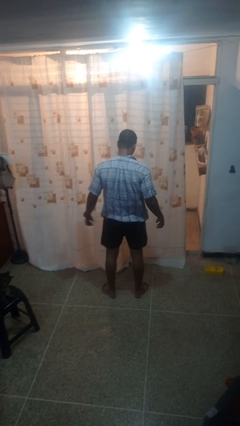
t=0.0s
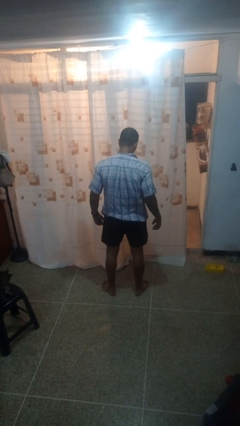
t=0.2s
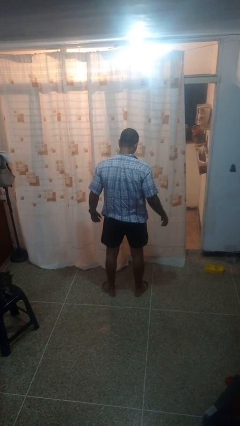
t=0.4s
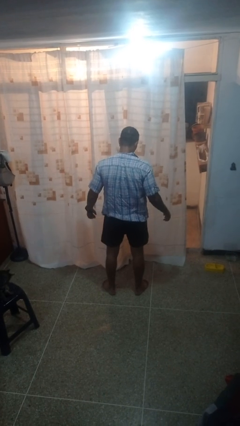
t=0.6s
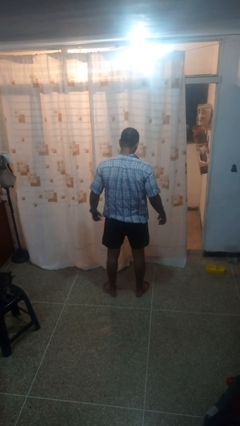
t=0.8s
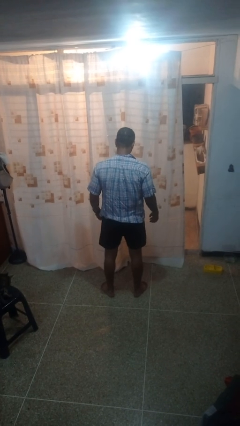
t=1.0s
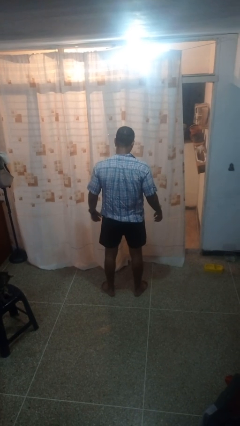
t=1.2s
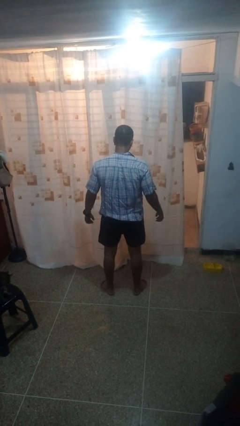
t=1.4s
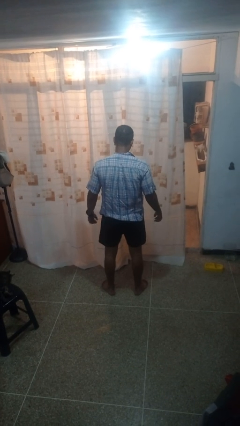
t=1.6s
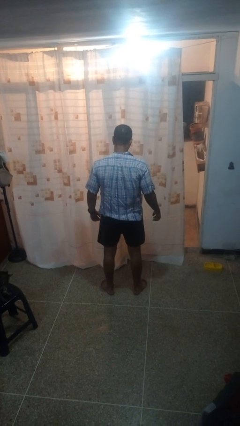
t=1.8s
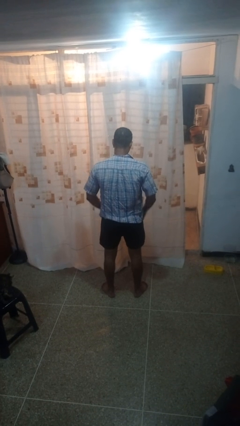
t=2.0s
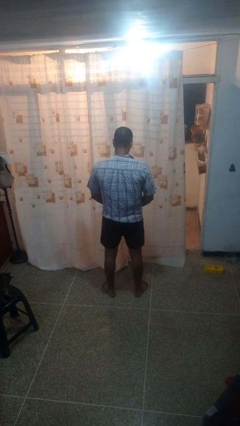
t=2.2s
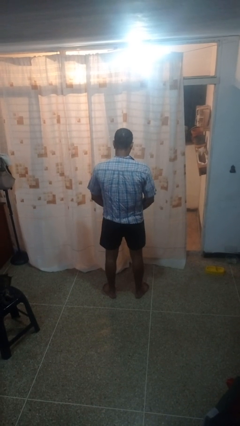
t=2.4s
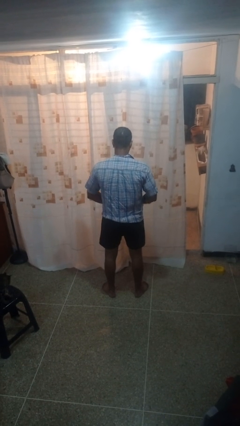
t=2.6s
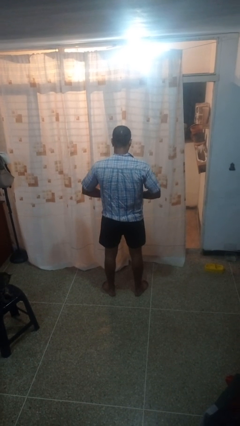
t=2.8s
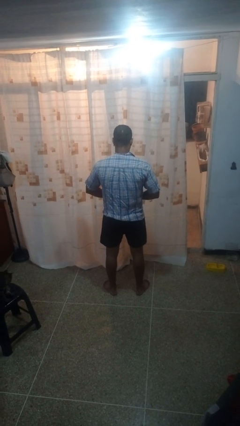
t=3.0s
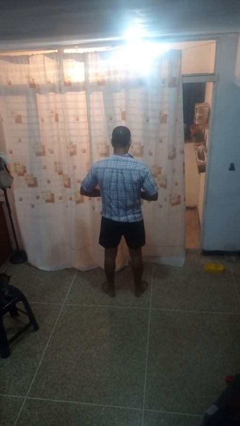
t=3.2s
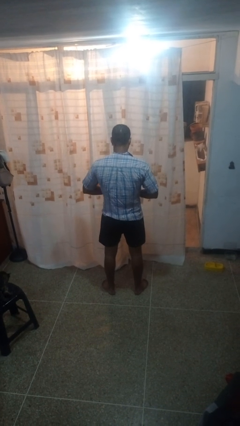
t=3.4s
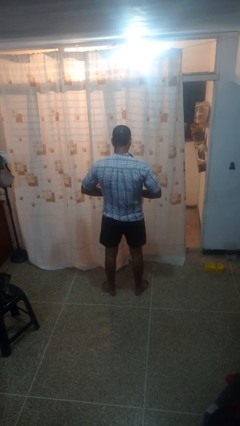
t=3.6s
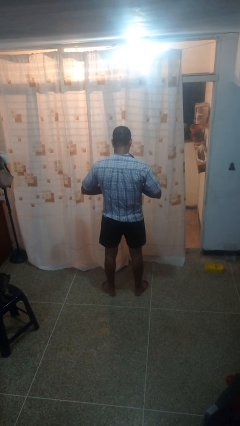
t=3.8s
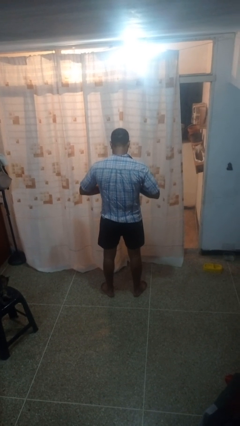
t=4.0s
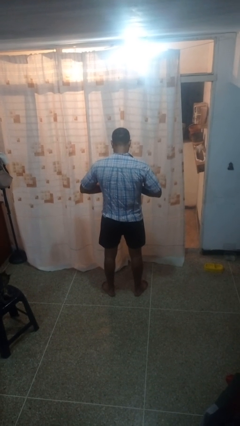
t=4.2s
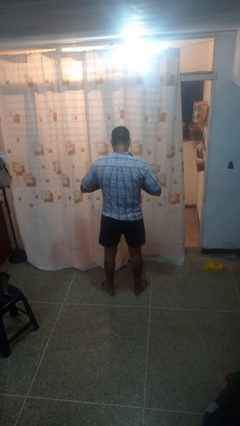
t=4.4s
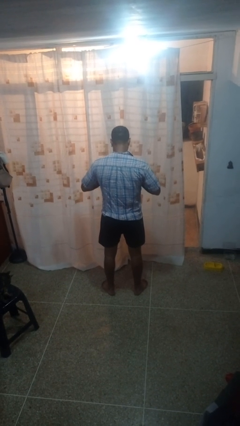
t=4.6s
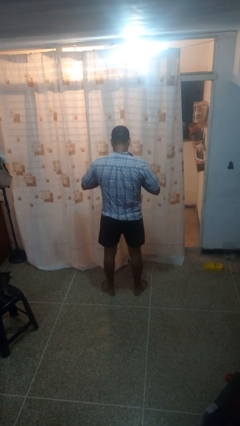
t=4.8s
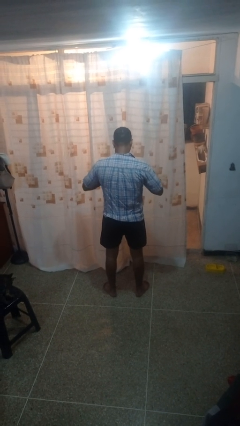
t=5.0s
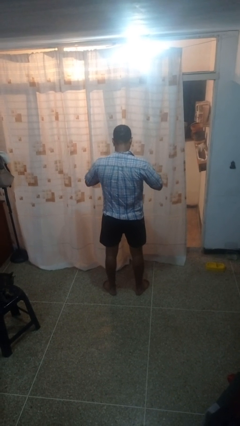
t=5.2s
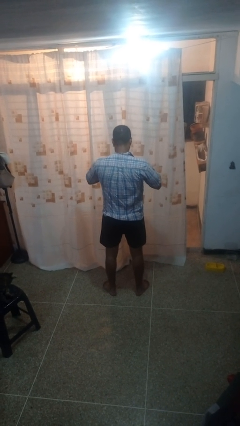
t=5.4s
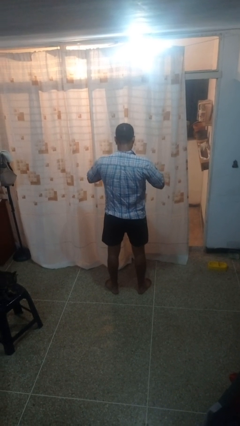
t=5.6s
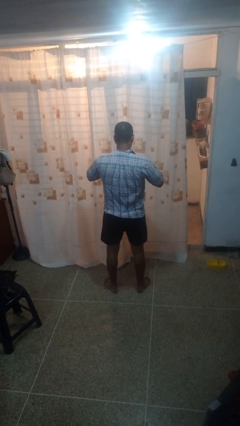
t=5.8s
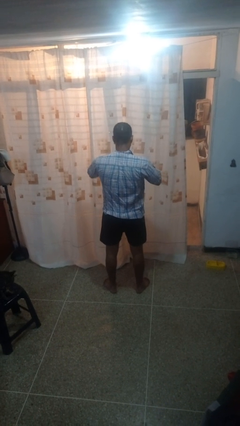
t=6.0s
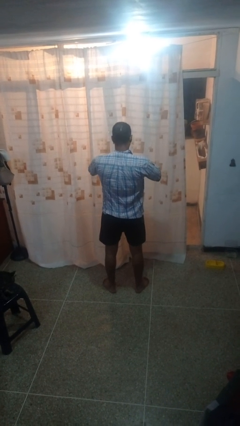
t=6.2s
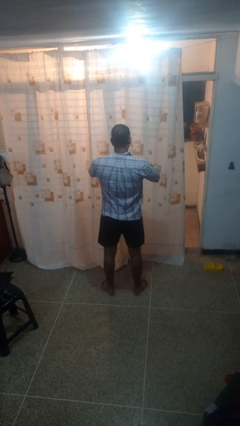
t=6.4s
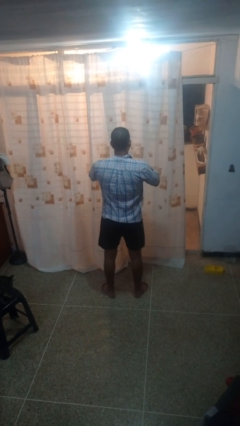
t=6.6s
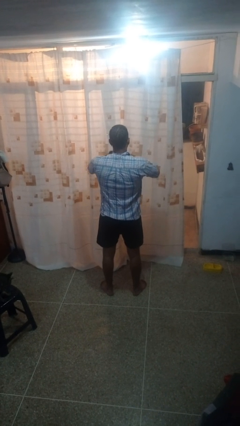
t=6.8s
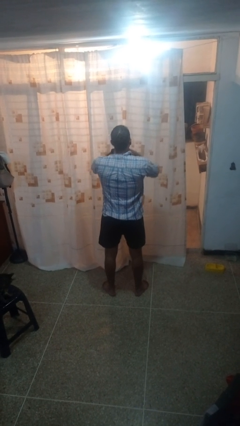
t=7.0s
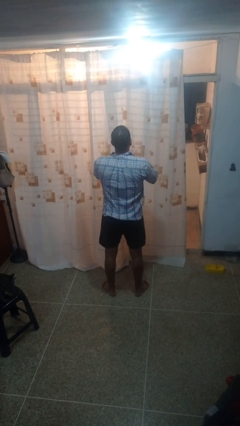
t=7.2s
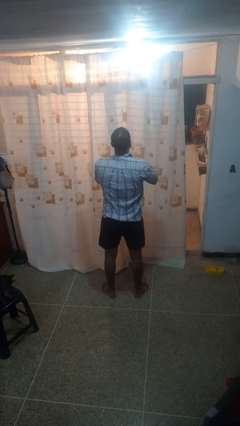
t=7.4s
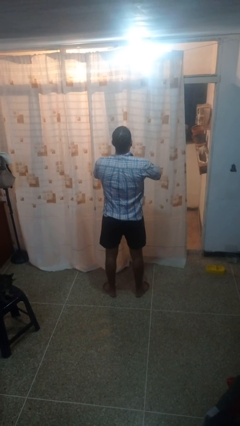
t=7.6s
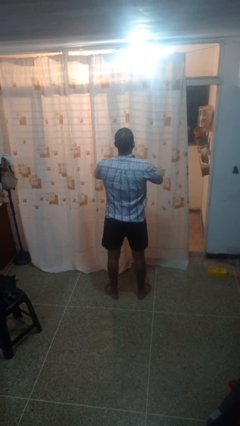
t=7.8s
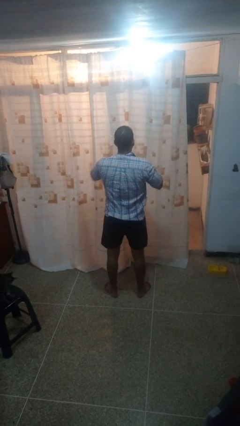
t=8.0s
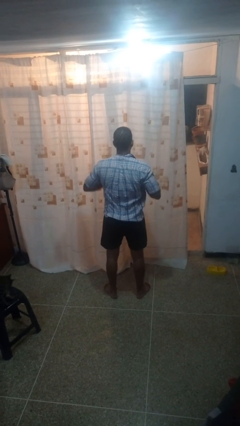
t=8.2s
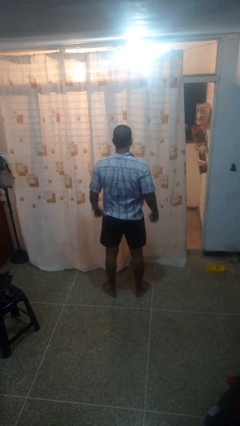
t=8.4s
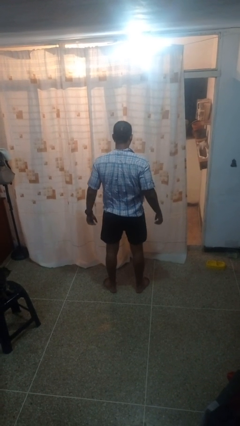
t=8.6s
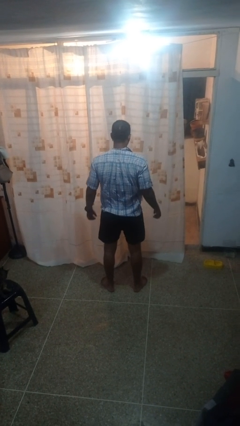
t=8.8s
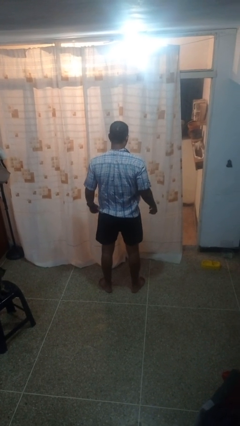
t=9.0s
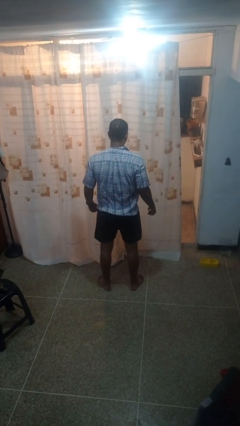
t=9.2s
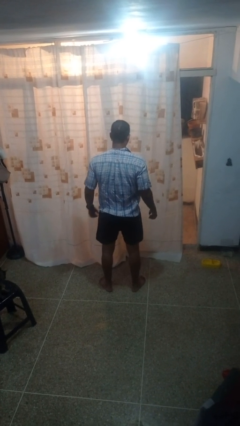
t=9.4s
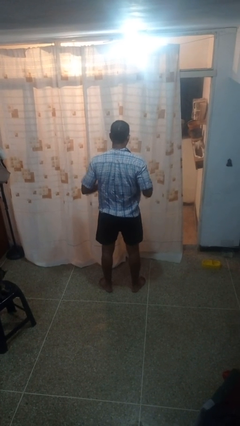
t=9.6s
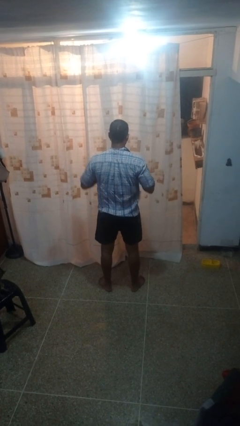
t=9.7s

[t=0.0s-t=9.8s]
person buttons shirt

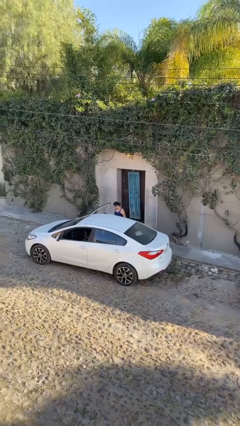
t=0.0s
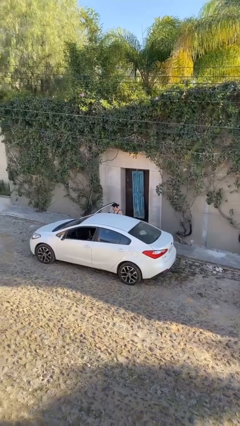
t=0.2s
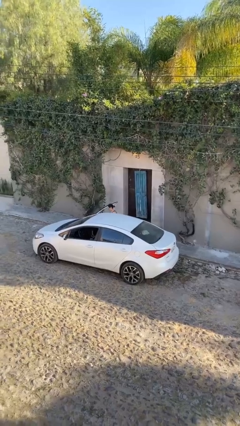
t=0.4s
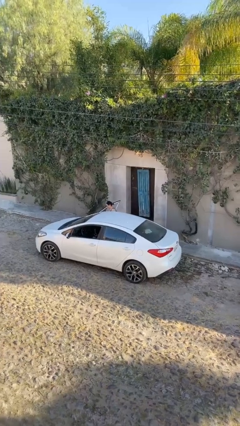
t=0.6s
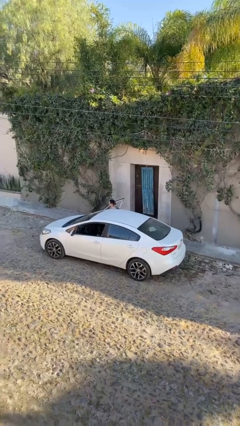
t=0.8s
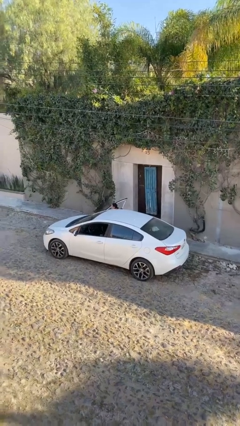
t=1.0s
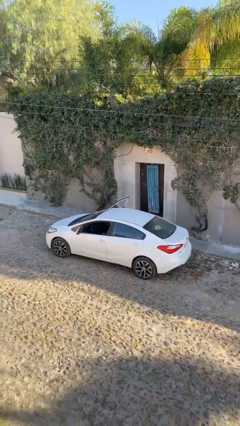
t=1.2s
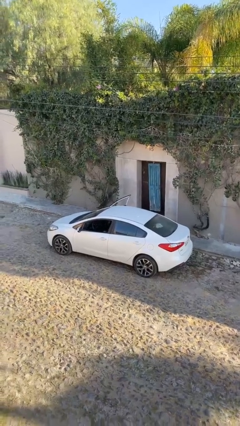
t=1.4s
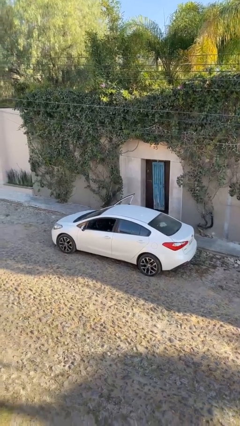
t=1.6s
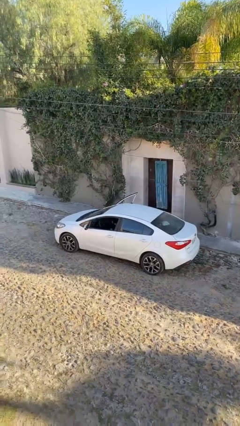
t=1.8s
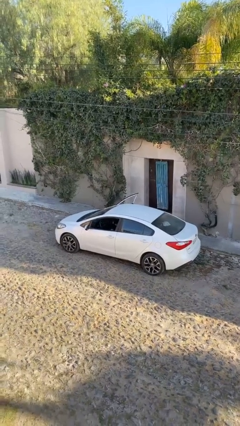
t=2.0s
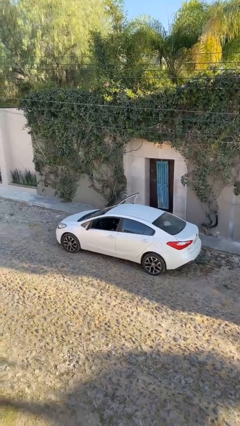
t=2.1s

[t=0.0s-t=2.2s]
person enters car

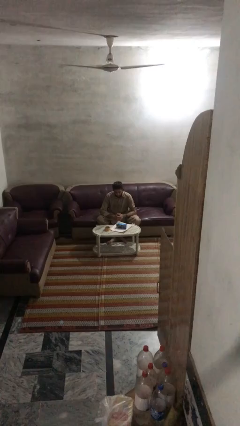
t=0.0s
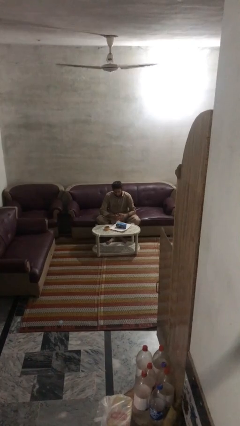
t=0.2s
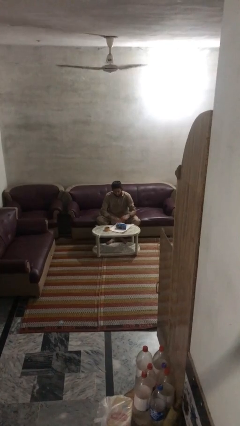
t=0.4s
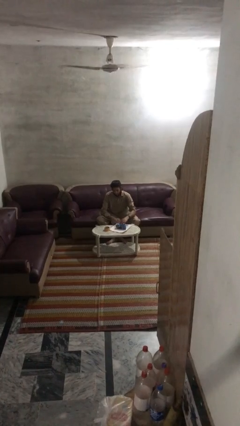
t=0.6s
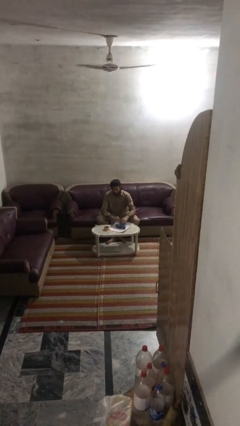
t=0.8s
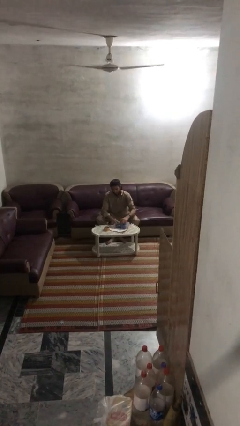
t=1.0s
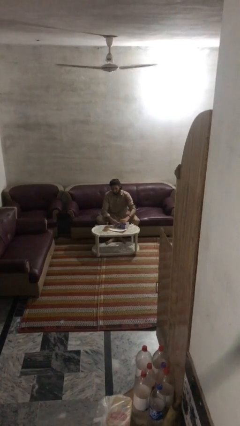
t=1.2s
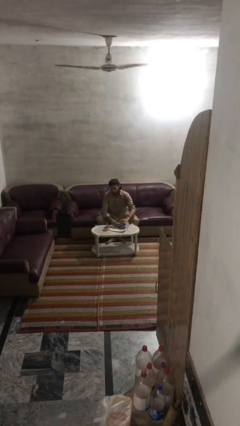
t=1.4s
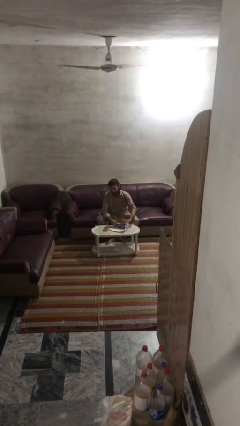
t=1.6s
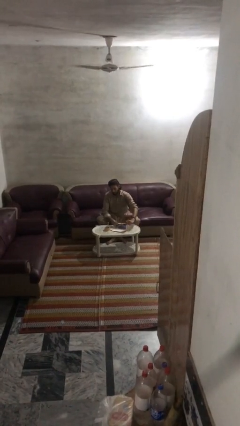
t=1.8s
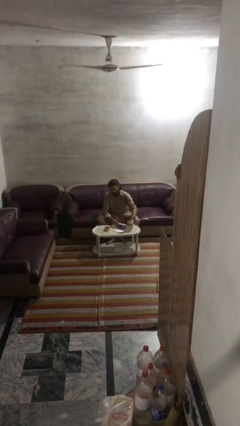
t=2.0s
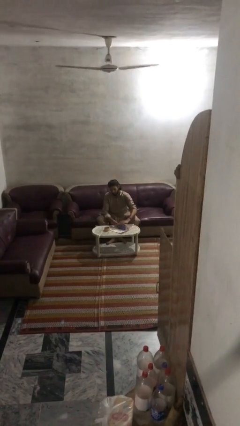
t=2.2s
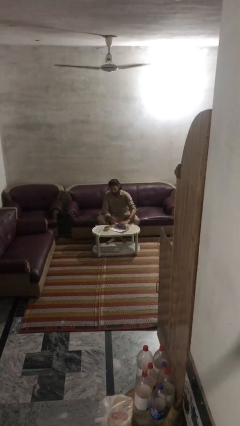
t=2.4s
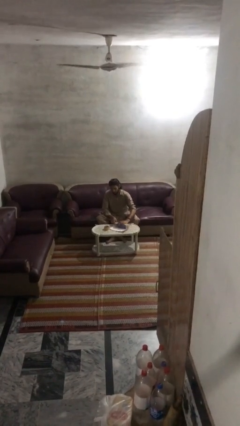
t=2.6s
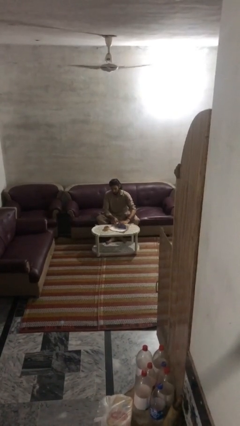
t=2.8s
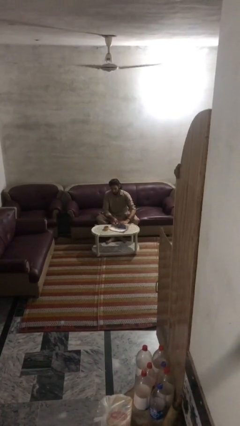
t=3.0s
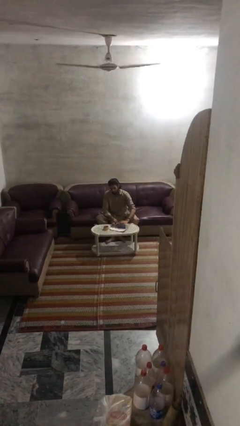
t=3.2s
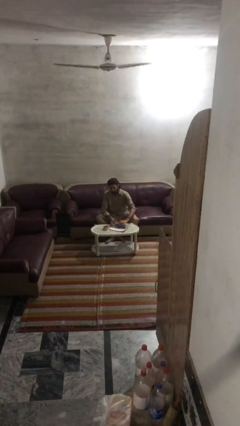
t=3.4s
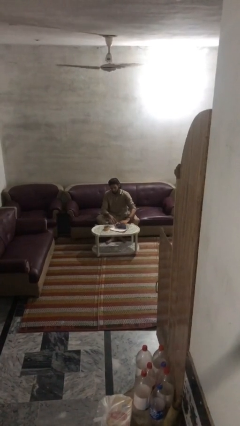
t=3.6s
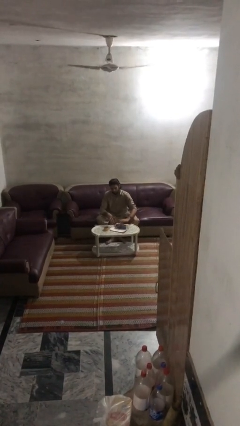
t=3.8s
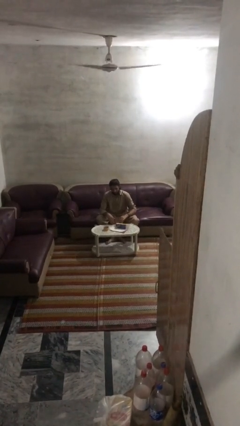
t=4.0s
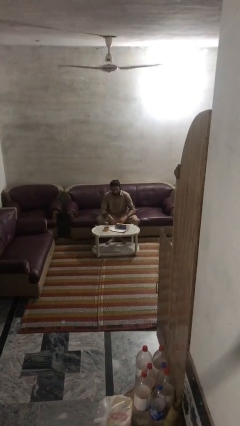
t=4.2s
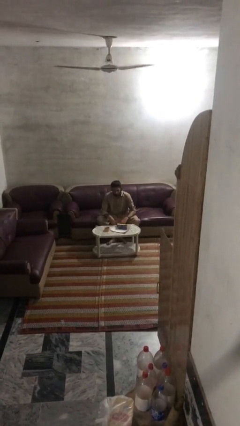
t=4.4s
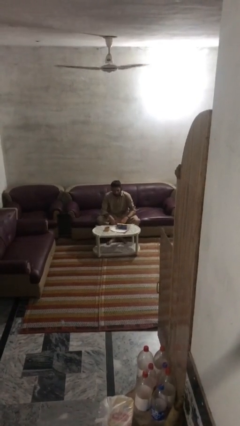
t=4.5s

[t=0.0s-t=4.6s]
person wraps box

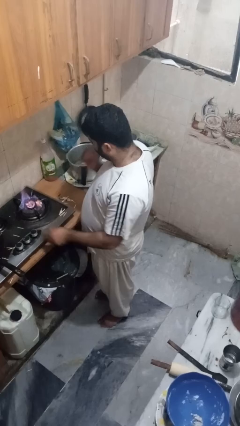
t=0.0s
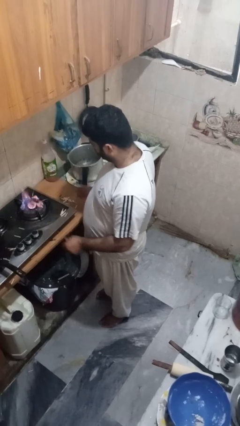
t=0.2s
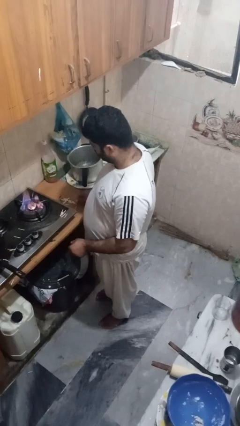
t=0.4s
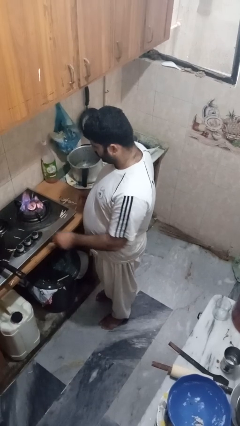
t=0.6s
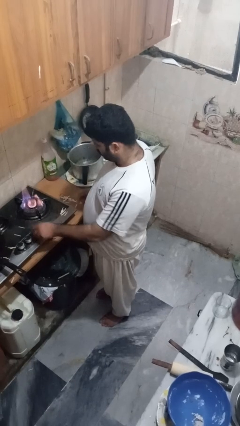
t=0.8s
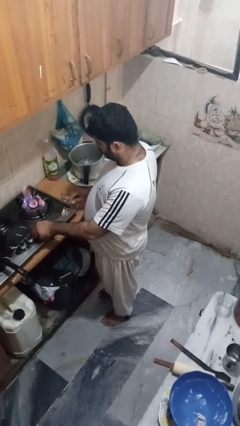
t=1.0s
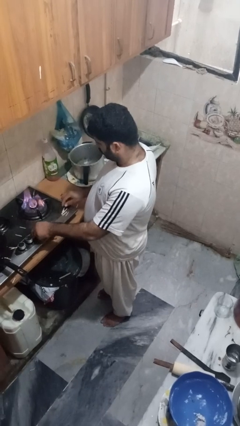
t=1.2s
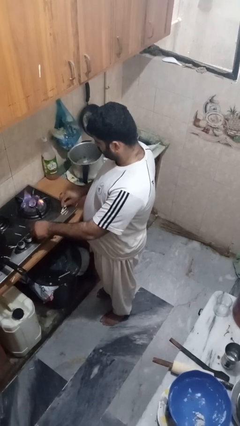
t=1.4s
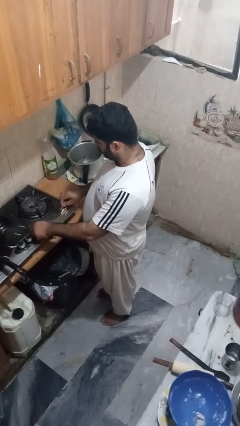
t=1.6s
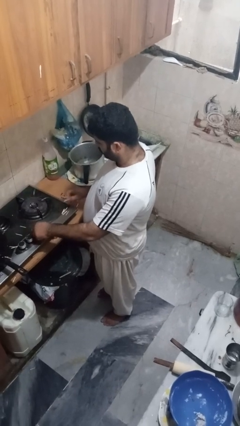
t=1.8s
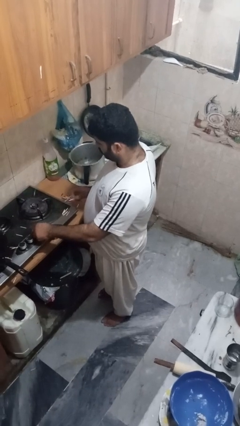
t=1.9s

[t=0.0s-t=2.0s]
person turns off stovetop
